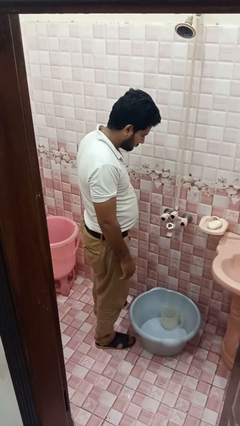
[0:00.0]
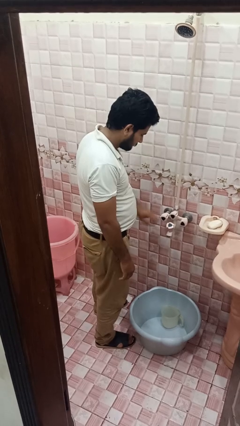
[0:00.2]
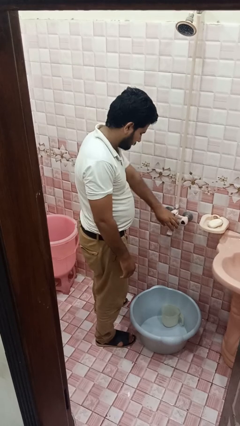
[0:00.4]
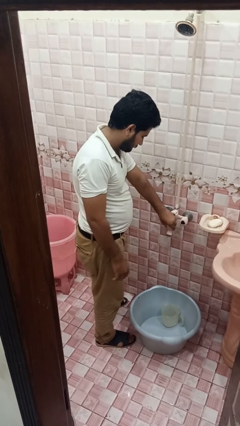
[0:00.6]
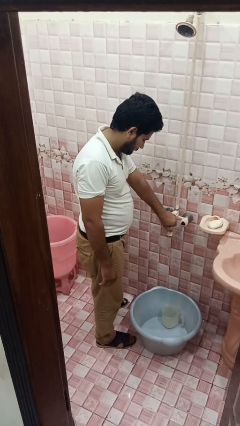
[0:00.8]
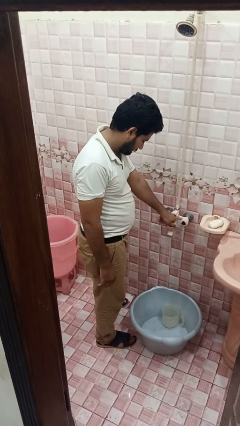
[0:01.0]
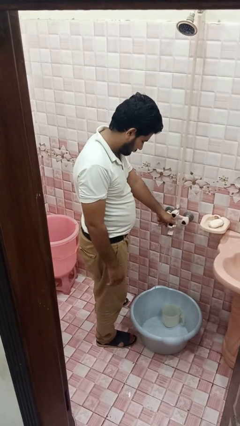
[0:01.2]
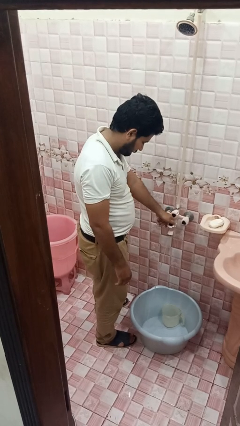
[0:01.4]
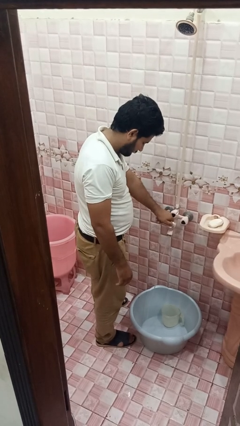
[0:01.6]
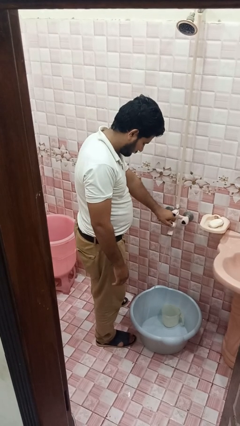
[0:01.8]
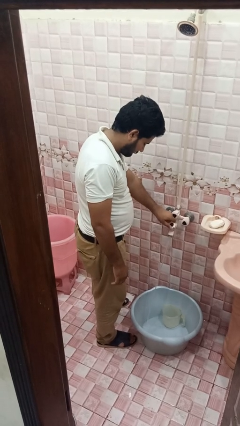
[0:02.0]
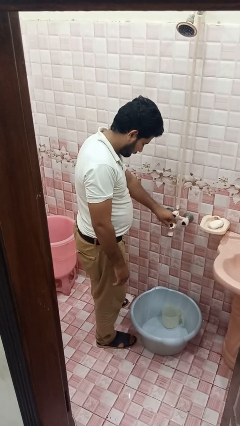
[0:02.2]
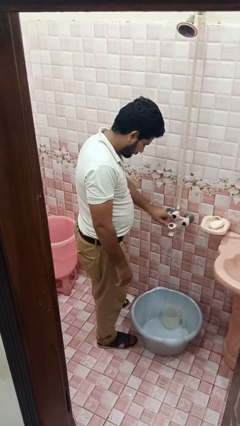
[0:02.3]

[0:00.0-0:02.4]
person turns on faucet

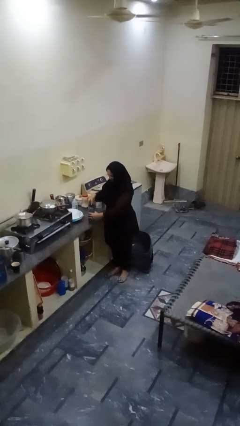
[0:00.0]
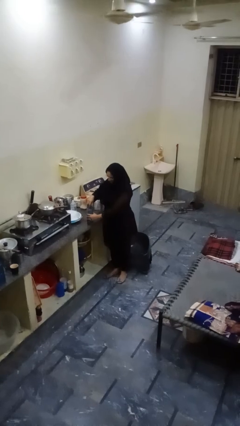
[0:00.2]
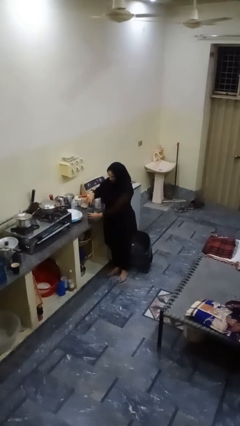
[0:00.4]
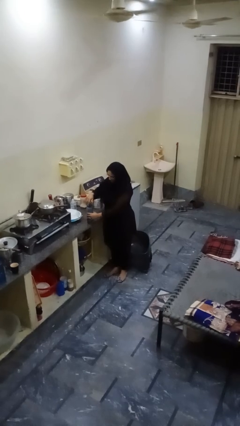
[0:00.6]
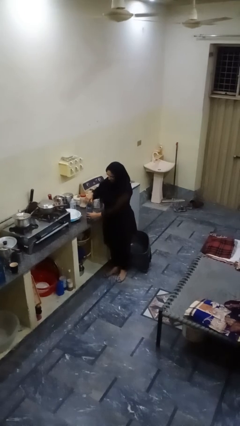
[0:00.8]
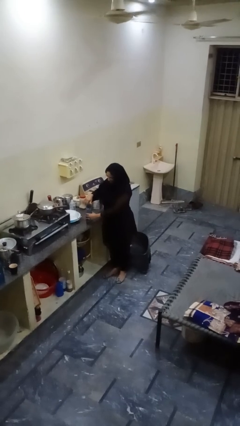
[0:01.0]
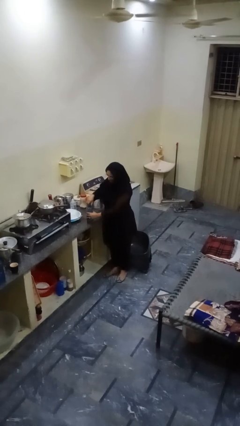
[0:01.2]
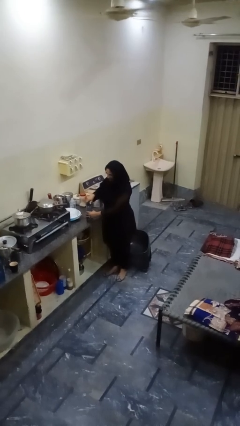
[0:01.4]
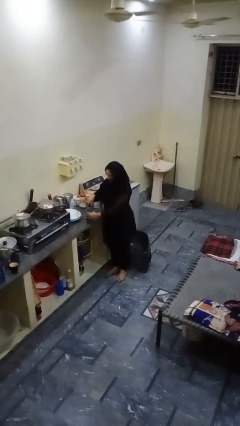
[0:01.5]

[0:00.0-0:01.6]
person screws lid to bottle

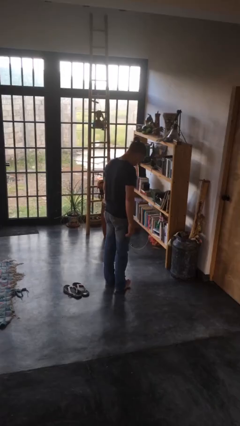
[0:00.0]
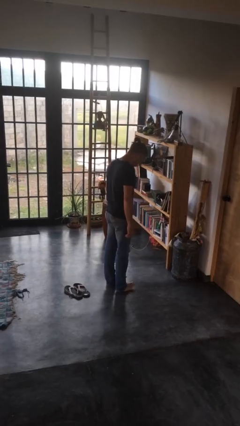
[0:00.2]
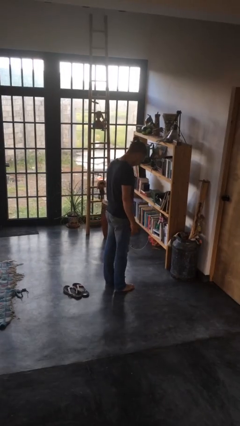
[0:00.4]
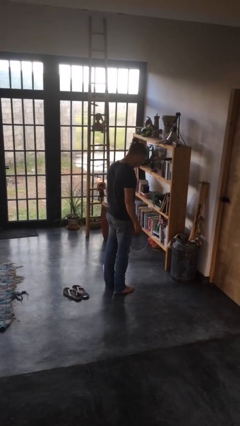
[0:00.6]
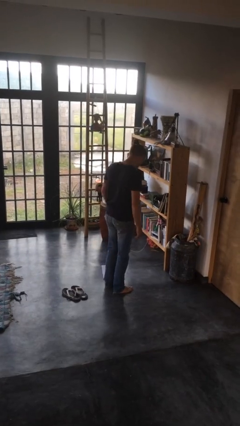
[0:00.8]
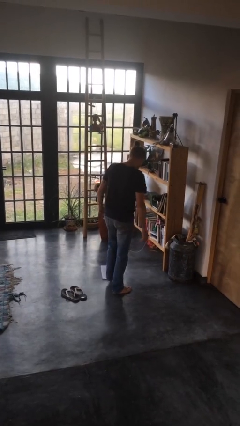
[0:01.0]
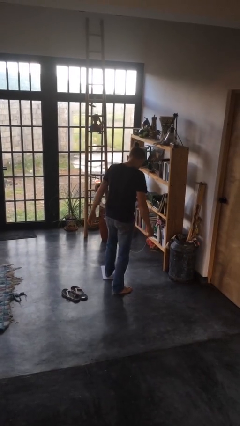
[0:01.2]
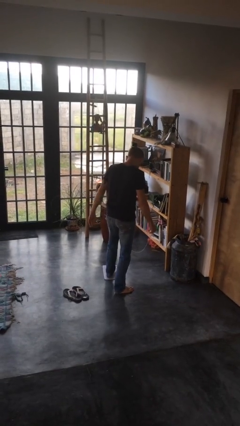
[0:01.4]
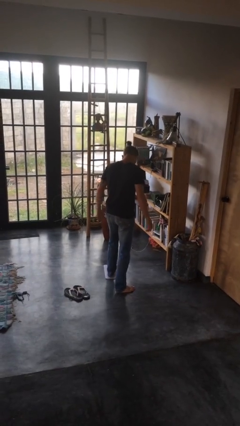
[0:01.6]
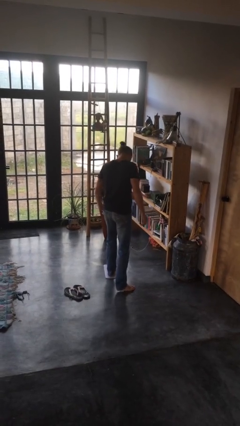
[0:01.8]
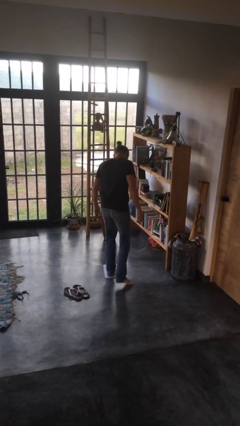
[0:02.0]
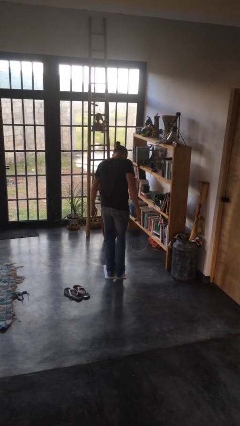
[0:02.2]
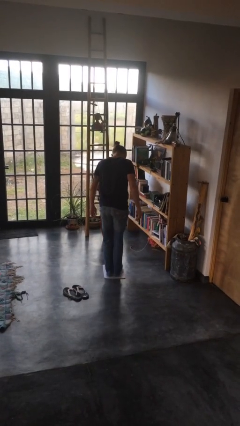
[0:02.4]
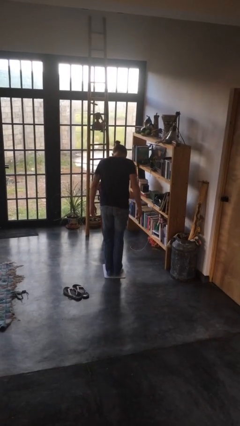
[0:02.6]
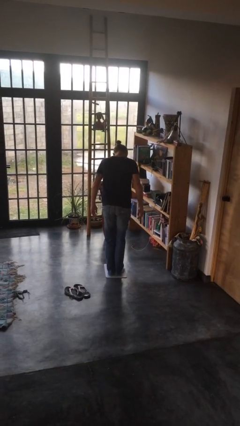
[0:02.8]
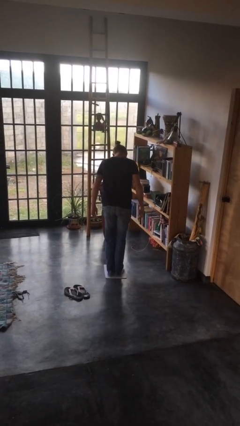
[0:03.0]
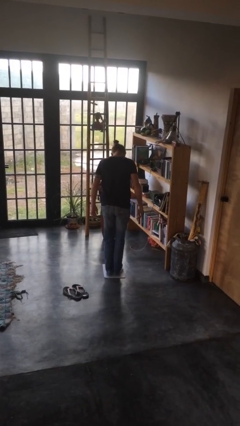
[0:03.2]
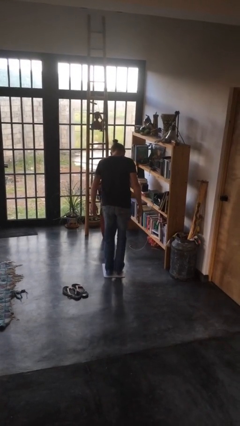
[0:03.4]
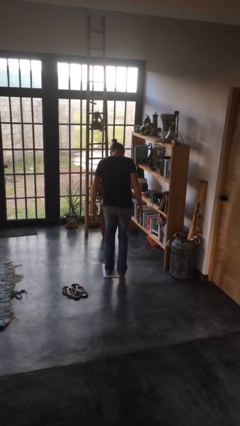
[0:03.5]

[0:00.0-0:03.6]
person uses bodyweight scale

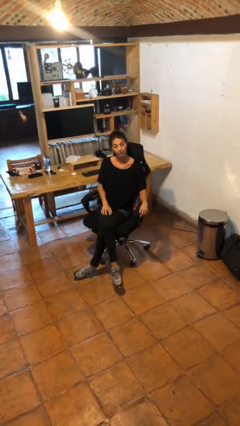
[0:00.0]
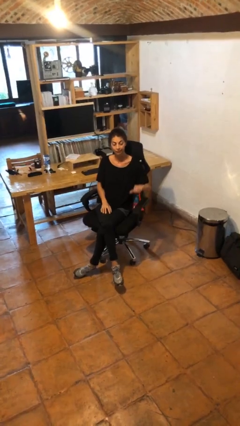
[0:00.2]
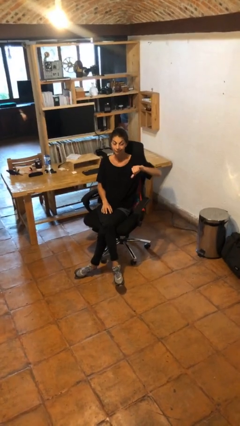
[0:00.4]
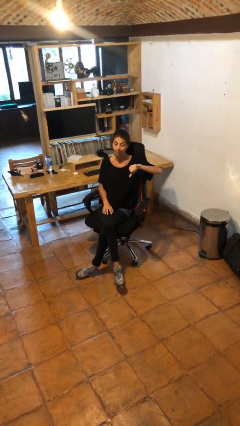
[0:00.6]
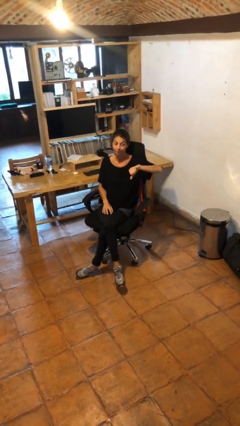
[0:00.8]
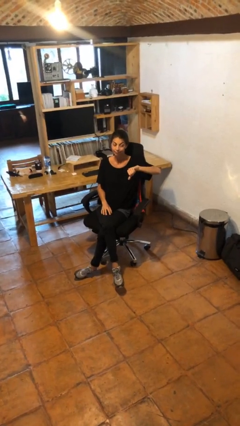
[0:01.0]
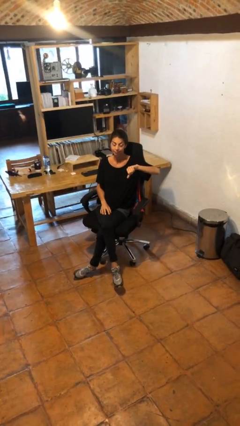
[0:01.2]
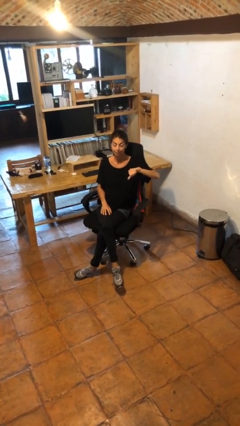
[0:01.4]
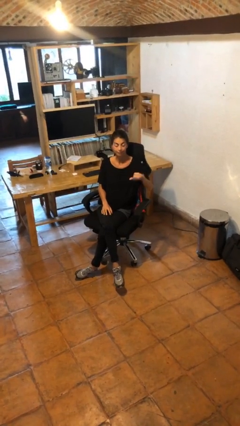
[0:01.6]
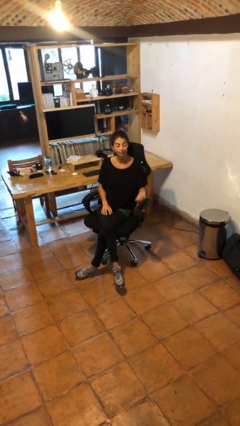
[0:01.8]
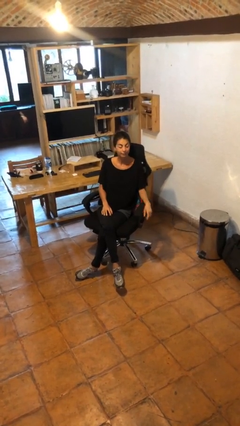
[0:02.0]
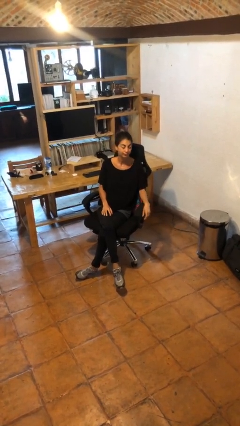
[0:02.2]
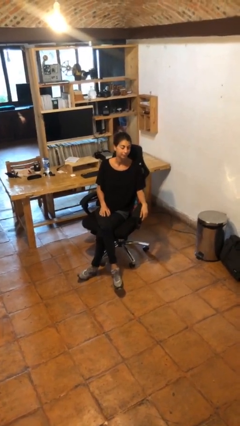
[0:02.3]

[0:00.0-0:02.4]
person gestures thumbs down

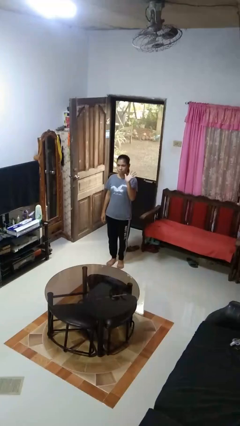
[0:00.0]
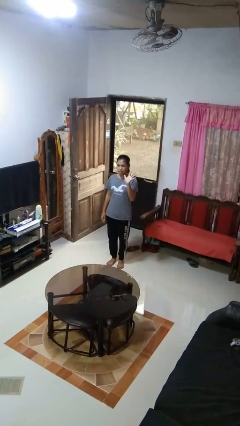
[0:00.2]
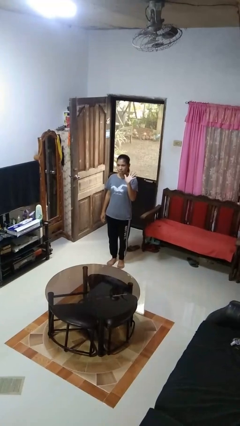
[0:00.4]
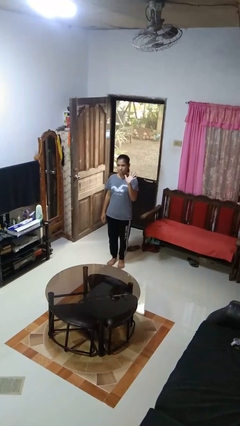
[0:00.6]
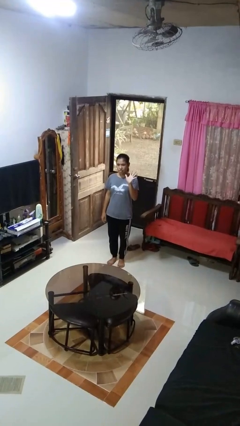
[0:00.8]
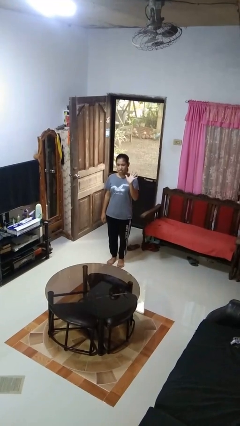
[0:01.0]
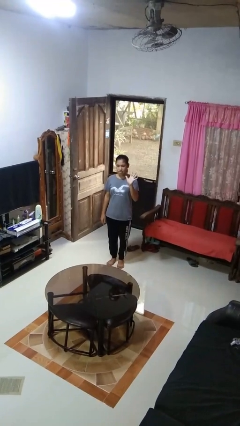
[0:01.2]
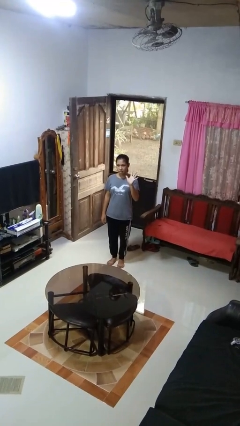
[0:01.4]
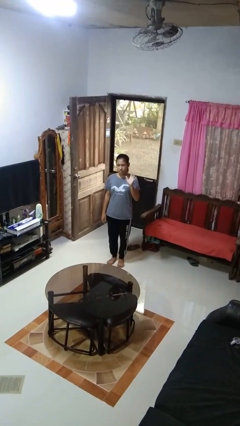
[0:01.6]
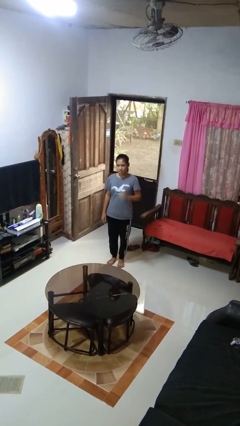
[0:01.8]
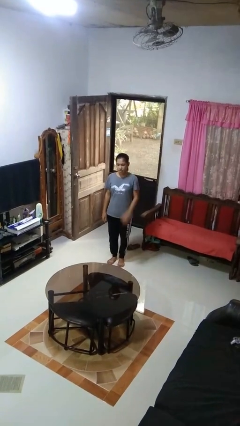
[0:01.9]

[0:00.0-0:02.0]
person gestures number five

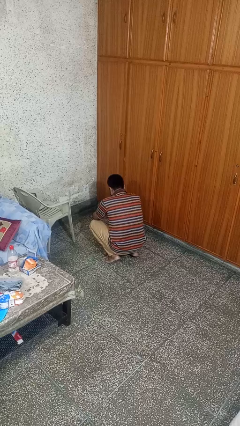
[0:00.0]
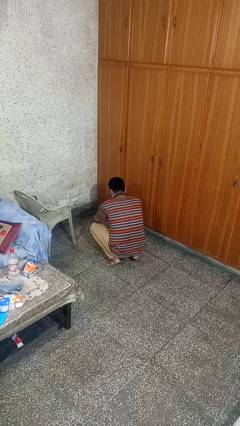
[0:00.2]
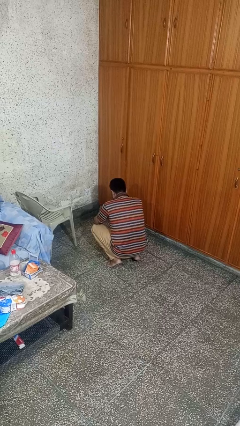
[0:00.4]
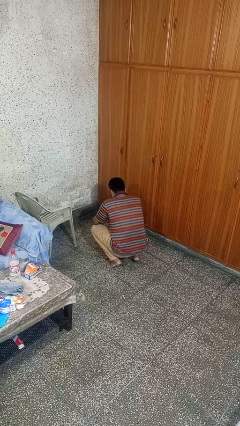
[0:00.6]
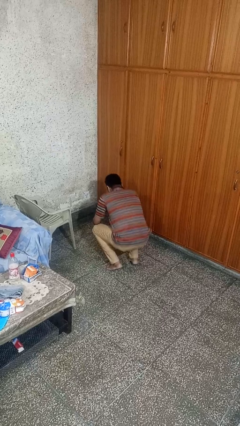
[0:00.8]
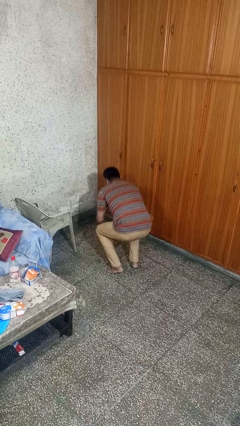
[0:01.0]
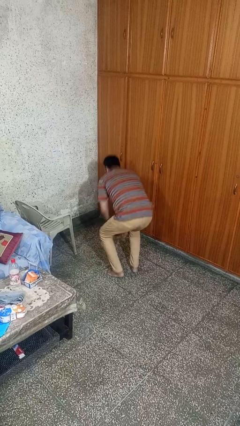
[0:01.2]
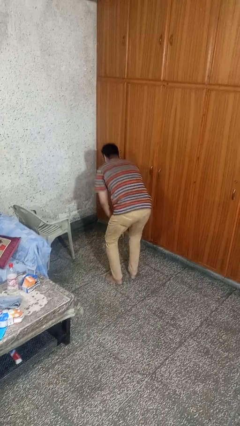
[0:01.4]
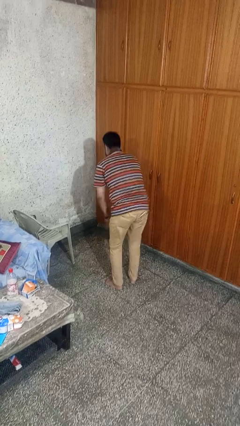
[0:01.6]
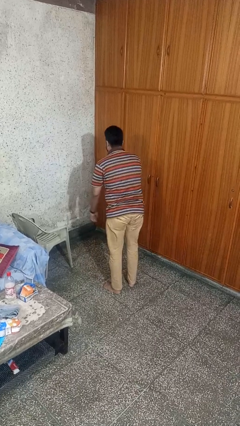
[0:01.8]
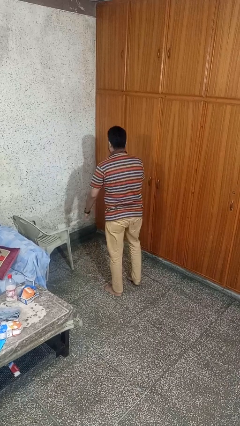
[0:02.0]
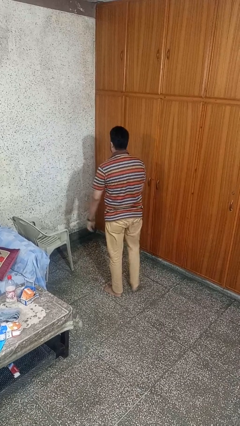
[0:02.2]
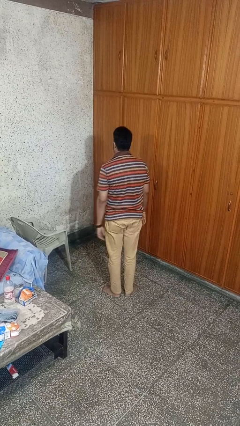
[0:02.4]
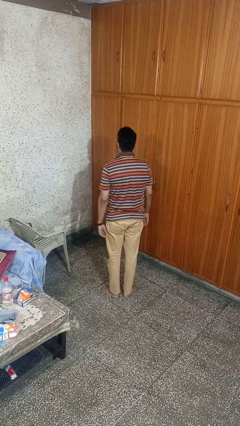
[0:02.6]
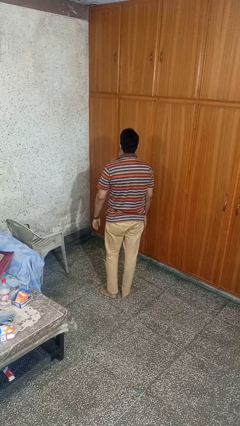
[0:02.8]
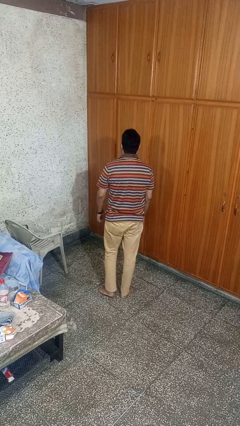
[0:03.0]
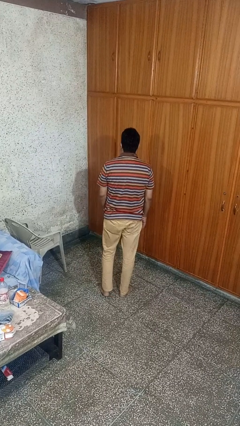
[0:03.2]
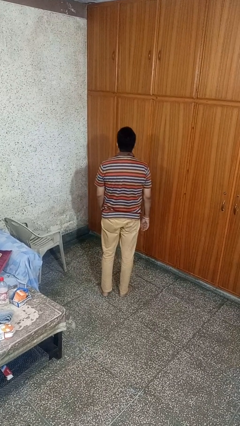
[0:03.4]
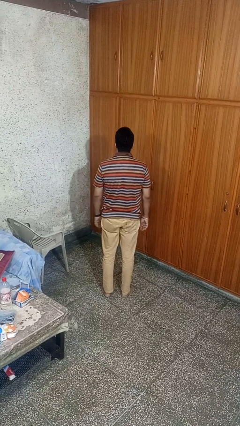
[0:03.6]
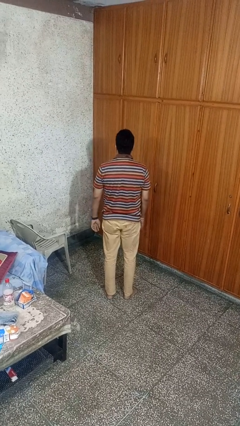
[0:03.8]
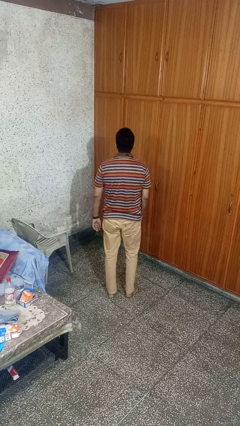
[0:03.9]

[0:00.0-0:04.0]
person stands up

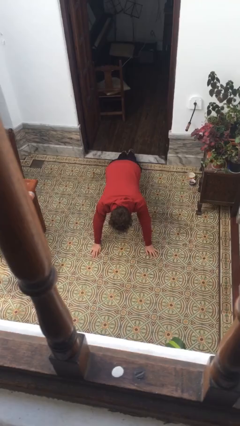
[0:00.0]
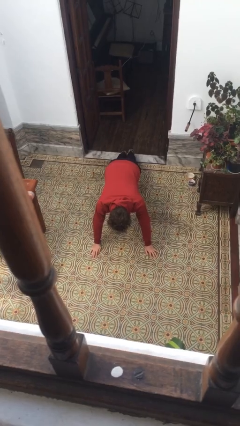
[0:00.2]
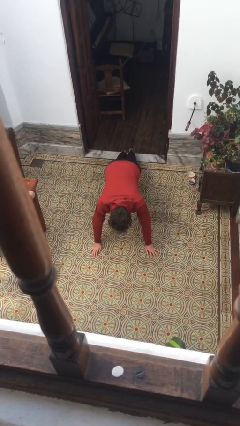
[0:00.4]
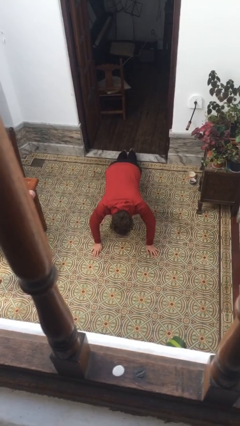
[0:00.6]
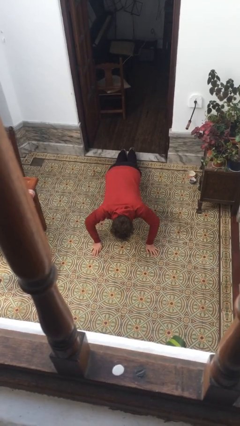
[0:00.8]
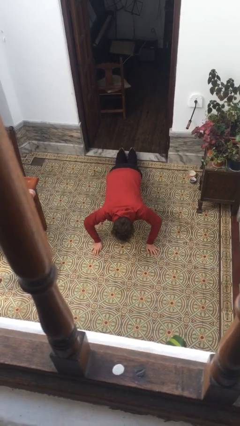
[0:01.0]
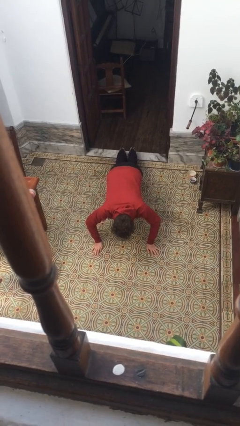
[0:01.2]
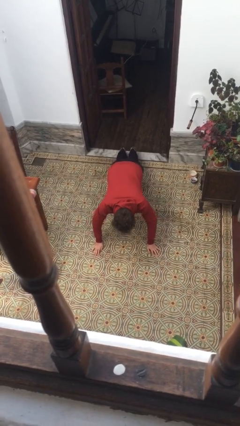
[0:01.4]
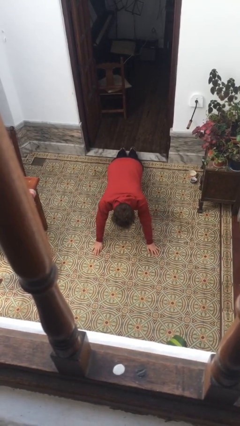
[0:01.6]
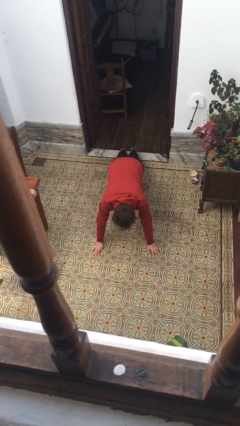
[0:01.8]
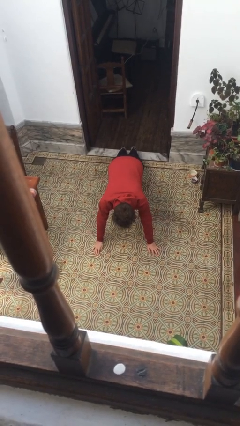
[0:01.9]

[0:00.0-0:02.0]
person exercises with pushup
